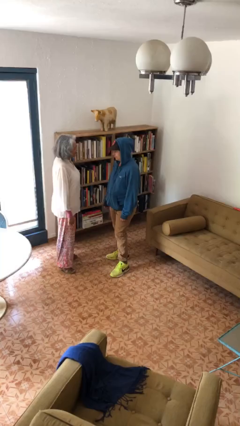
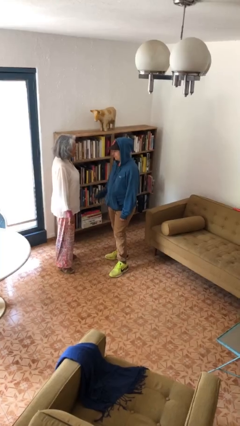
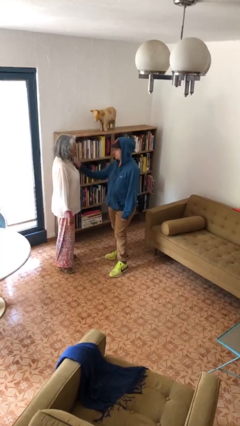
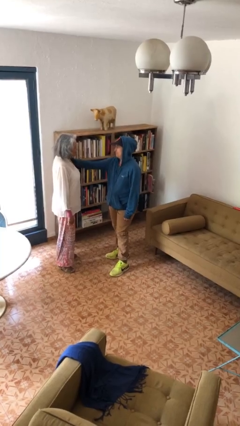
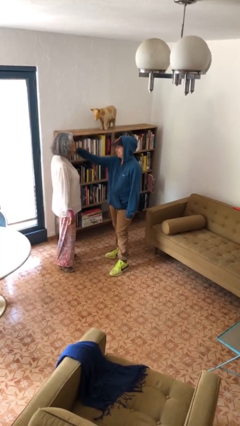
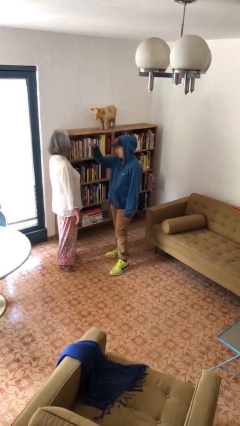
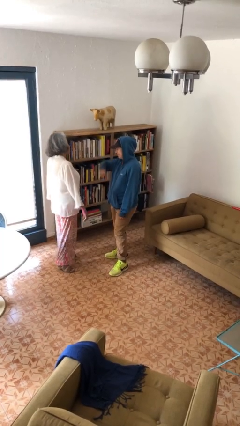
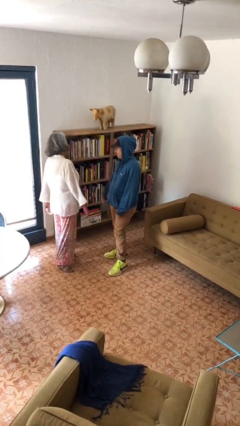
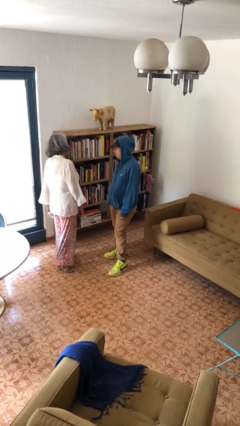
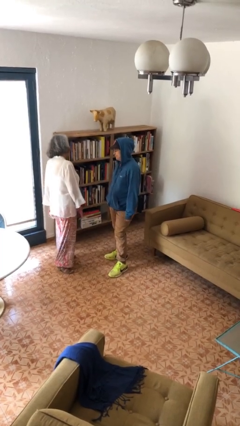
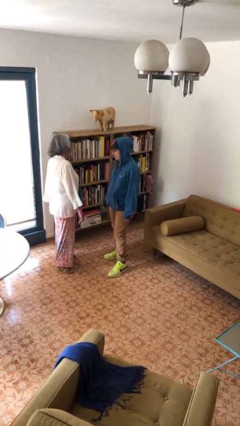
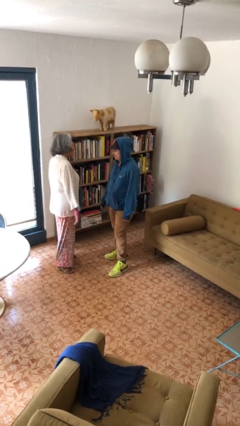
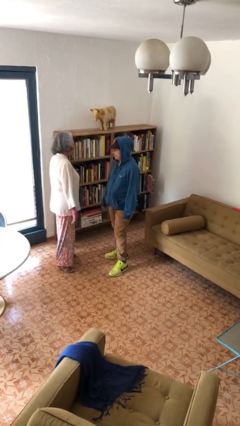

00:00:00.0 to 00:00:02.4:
person shoves person

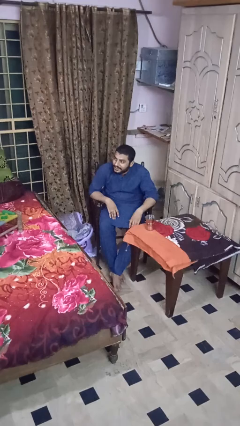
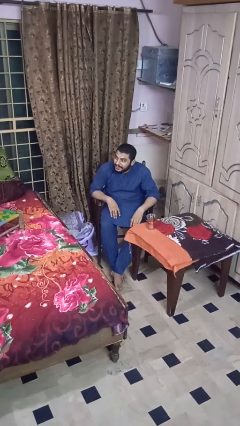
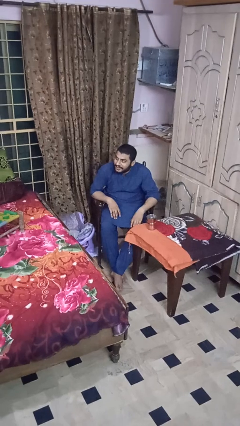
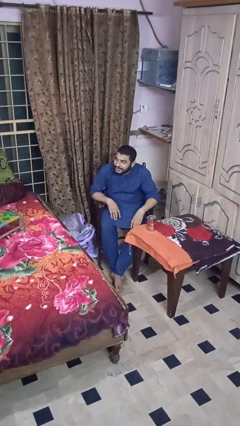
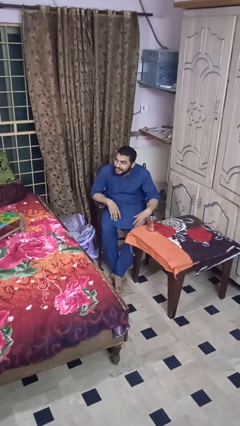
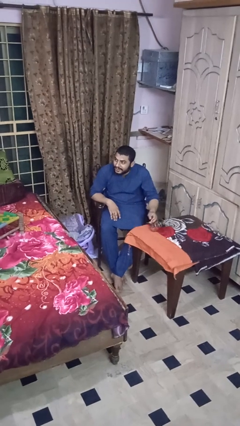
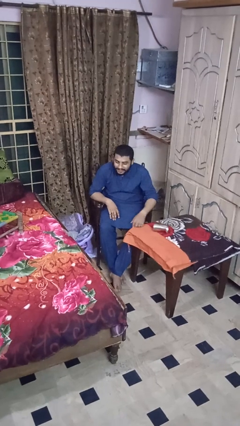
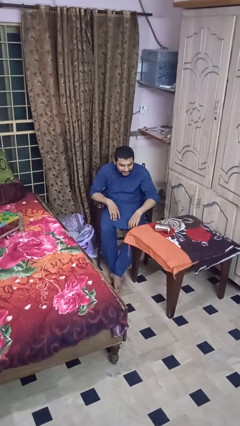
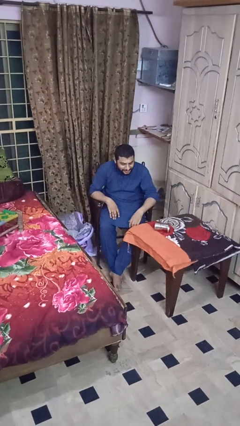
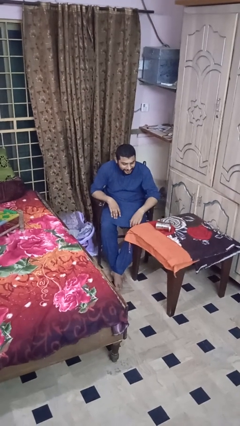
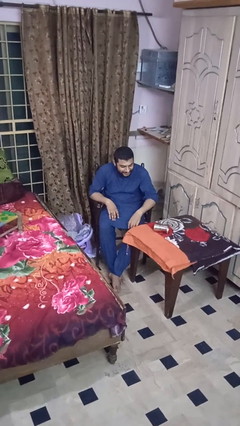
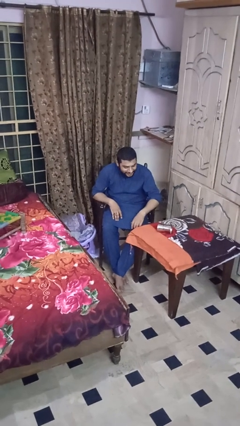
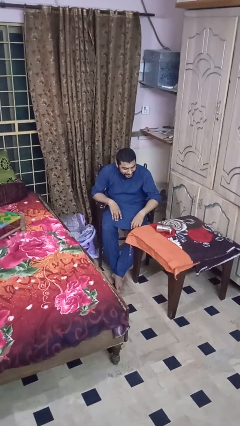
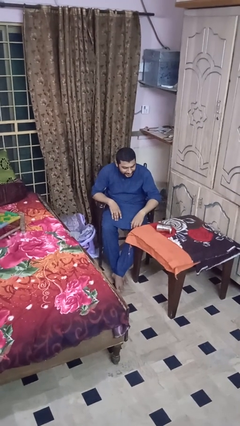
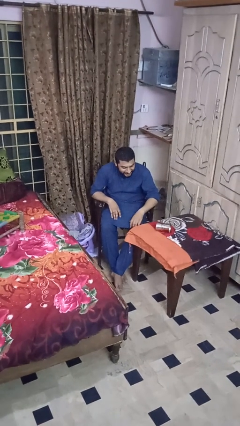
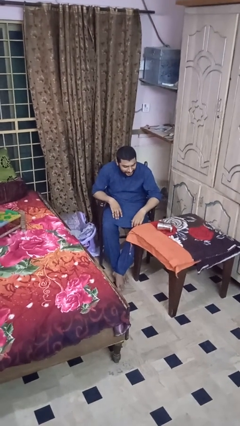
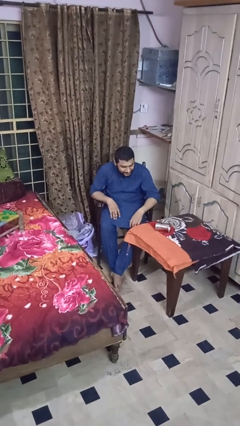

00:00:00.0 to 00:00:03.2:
person knocks over glass

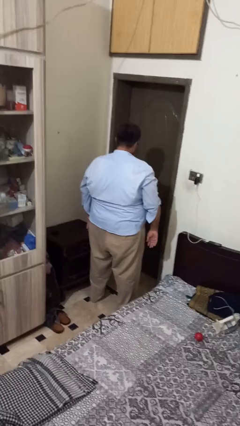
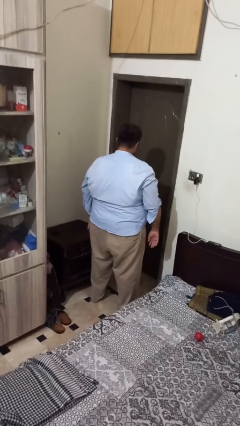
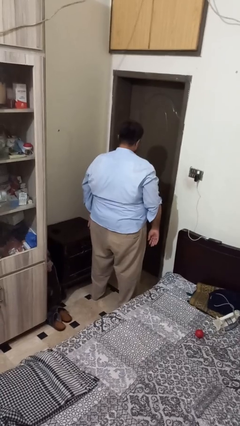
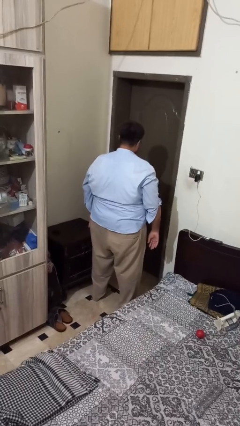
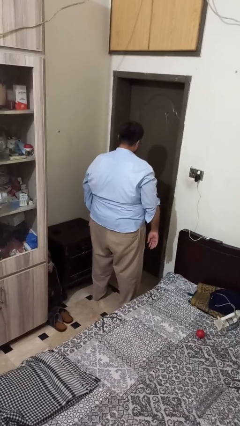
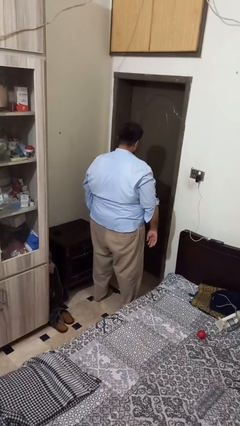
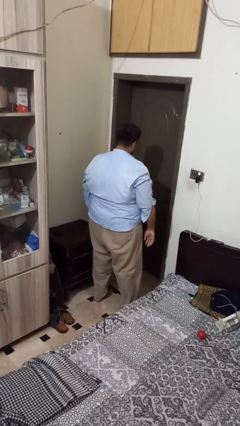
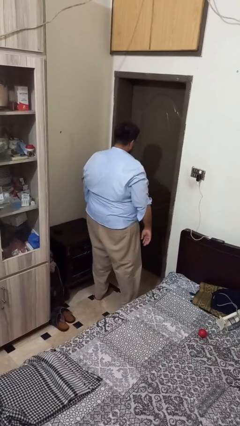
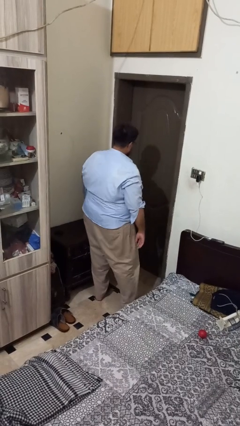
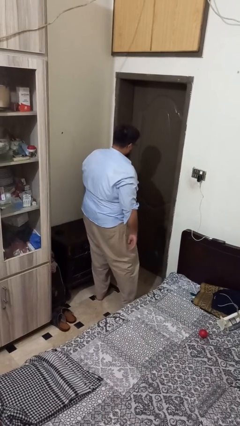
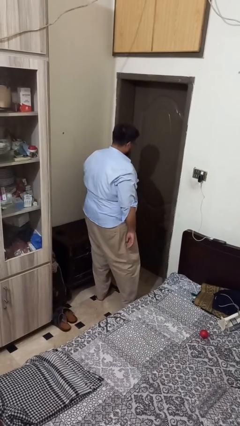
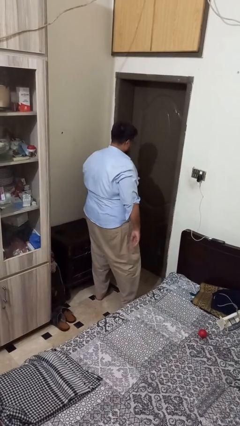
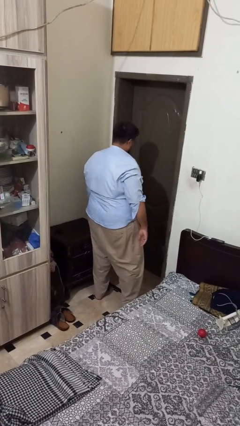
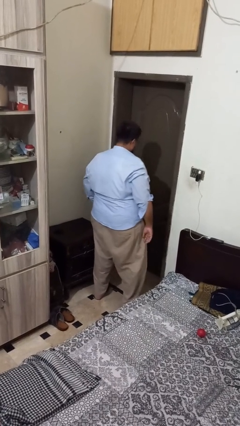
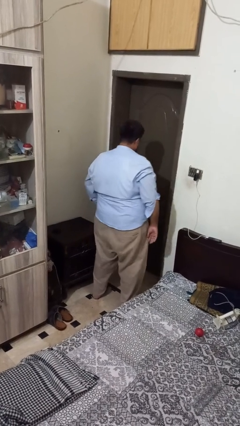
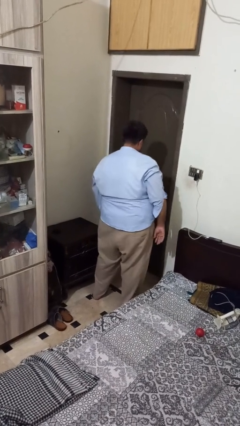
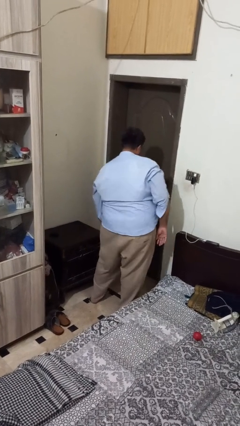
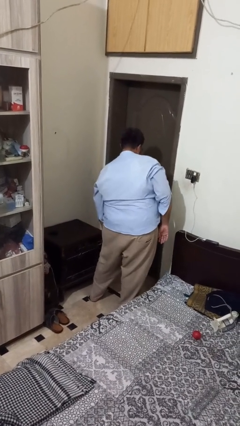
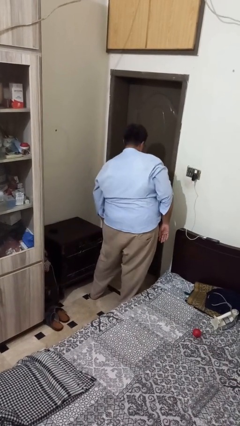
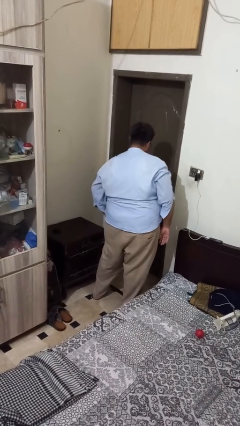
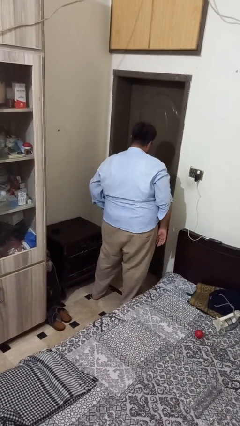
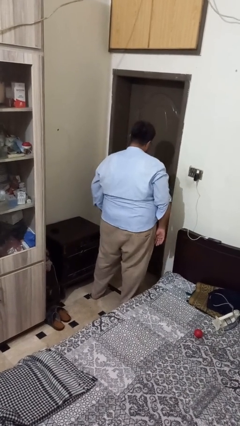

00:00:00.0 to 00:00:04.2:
person bumps into table

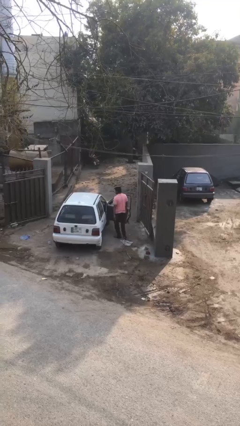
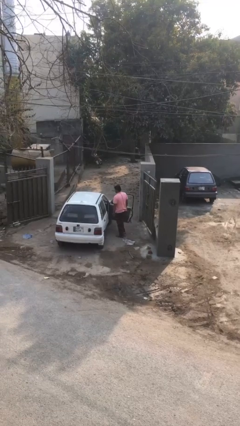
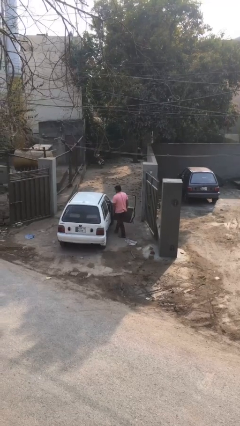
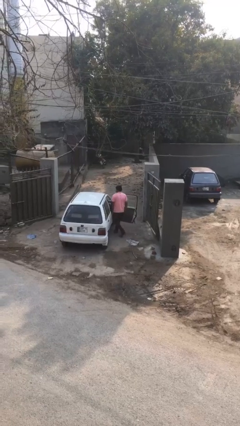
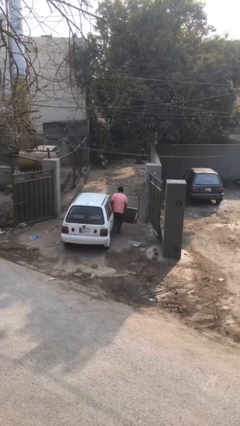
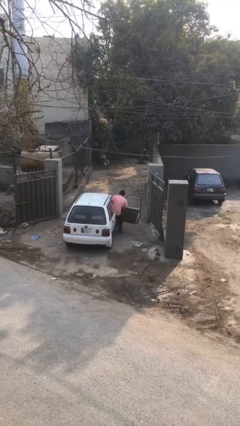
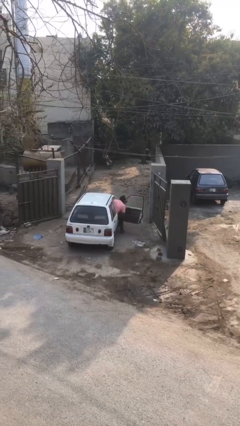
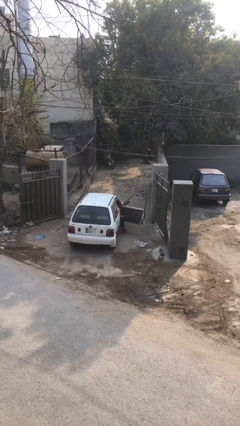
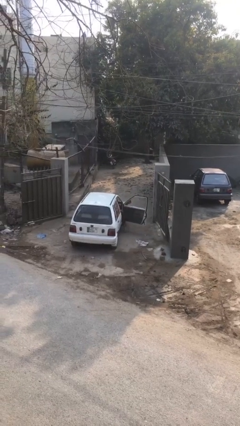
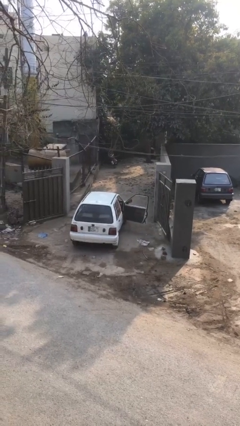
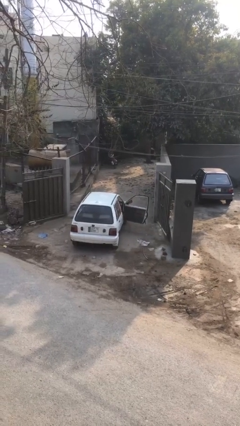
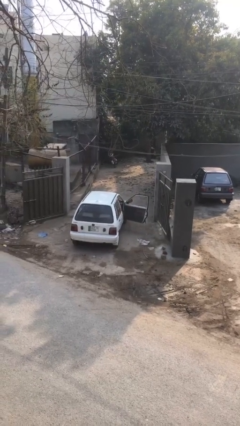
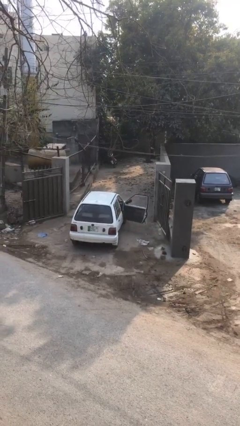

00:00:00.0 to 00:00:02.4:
person enters car

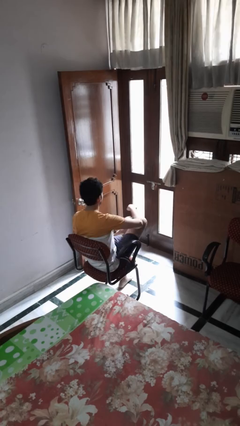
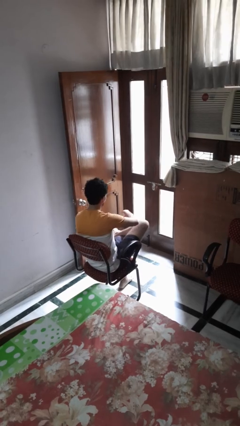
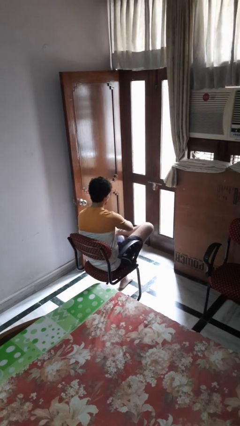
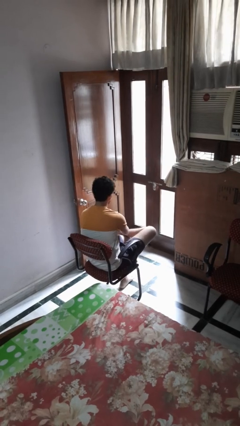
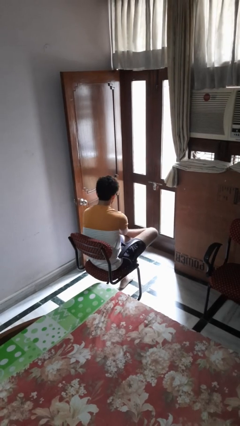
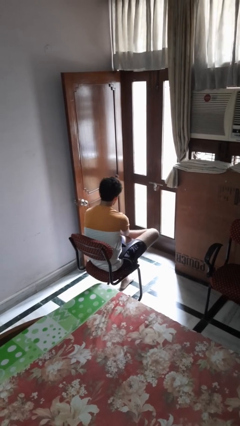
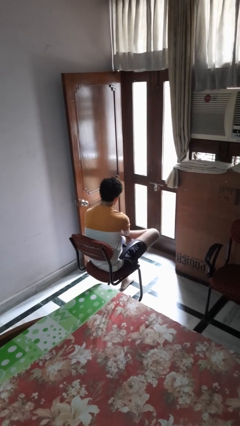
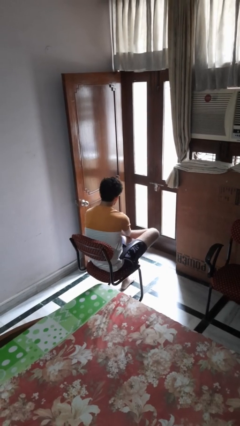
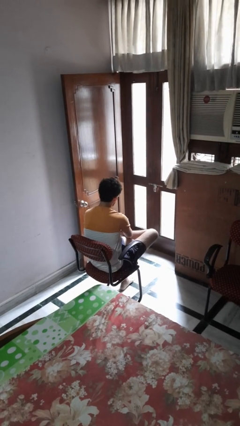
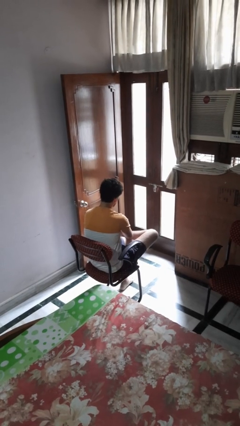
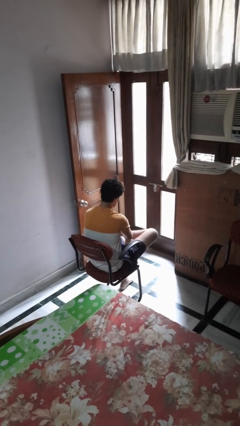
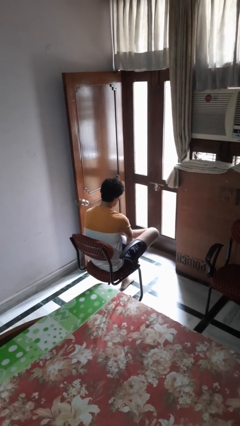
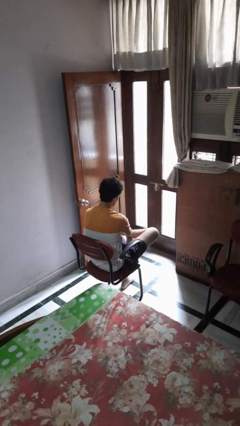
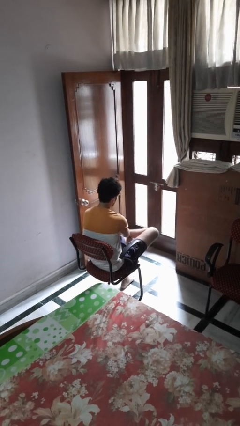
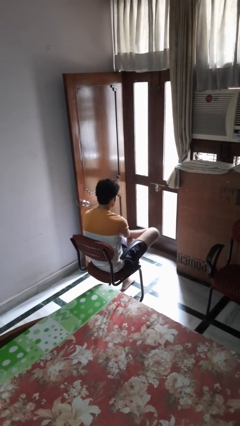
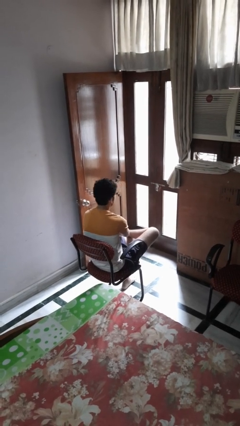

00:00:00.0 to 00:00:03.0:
person rubs foot

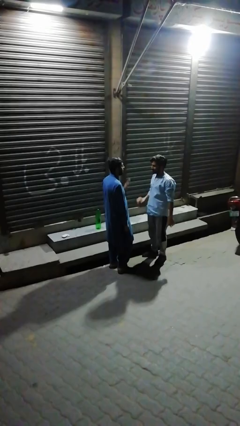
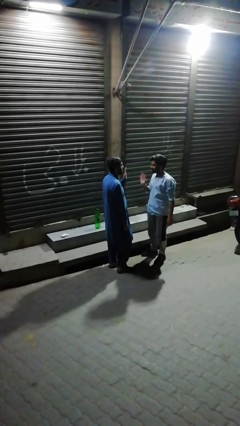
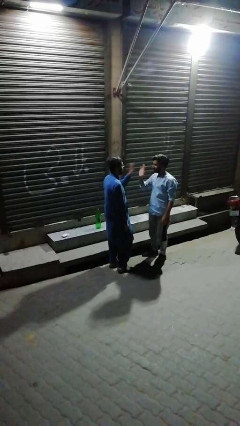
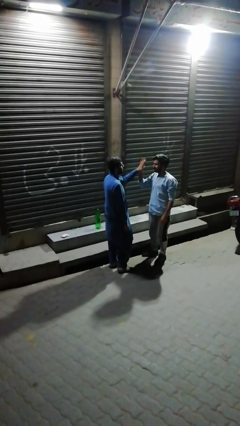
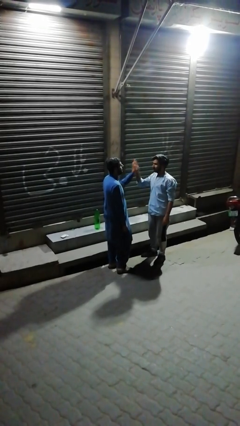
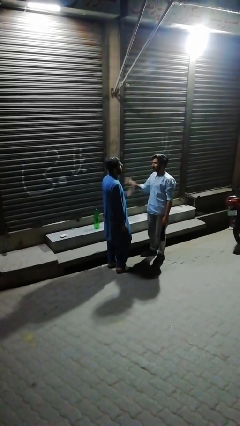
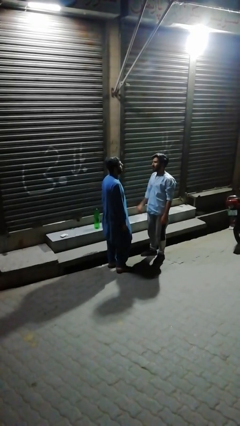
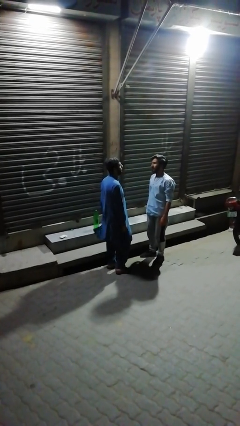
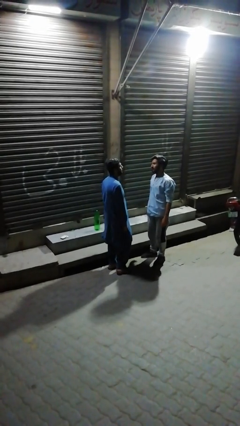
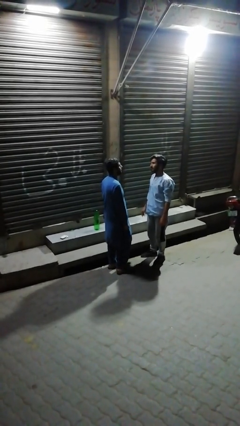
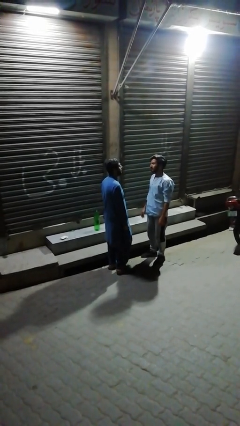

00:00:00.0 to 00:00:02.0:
person highfives hand
